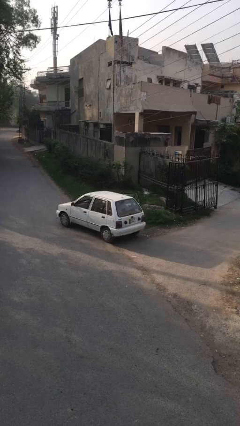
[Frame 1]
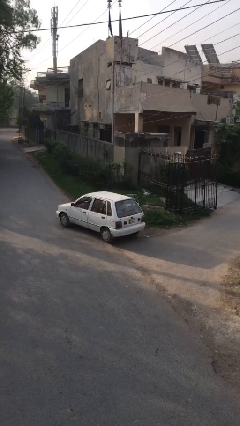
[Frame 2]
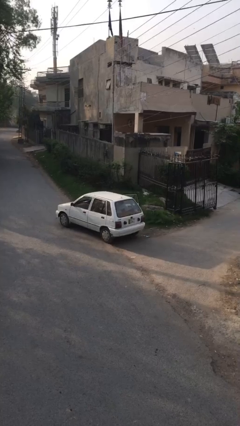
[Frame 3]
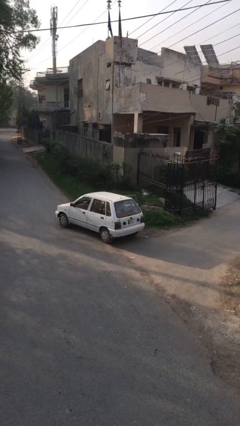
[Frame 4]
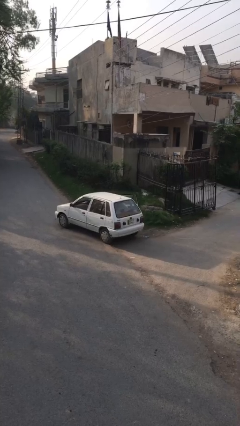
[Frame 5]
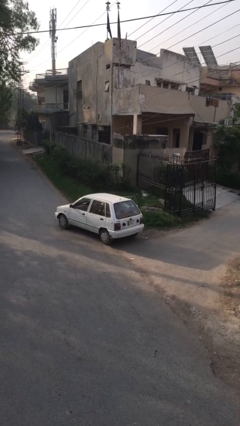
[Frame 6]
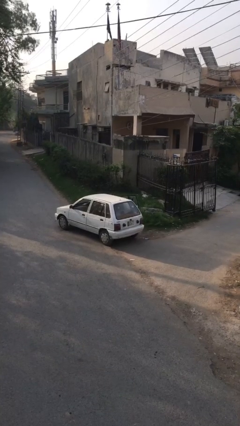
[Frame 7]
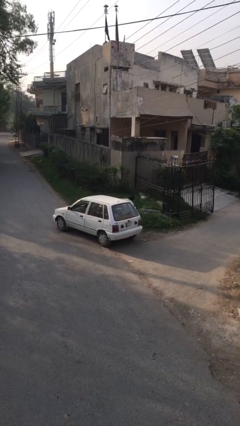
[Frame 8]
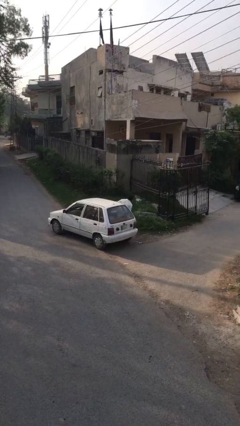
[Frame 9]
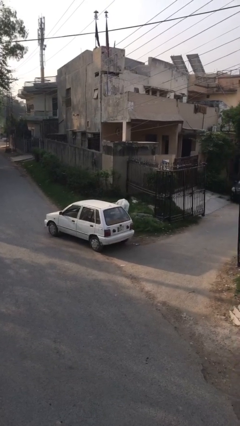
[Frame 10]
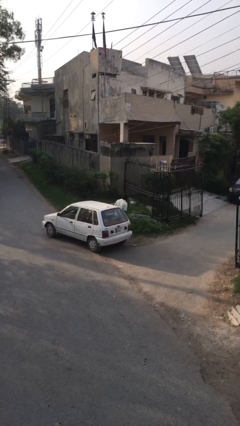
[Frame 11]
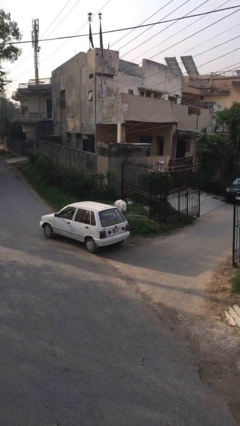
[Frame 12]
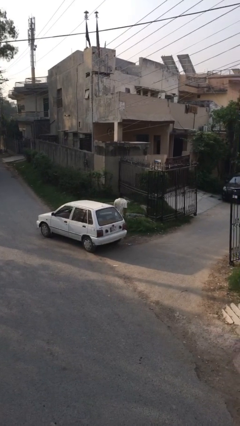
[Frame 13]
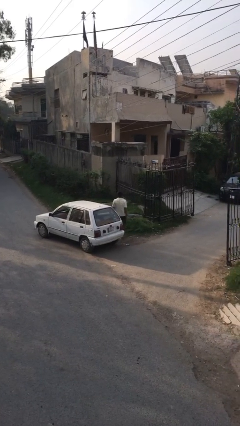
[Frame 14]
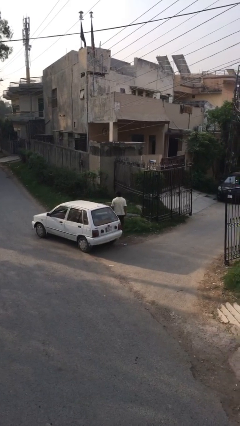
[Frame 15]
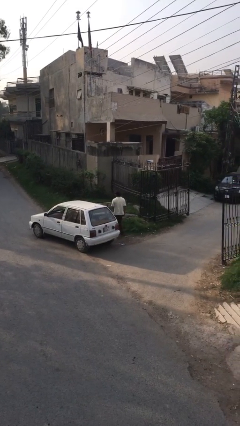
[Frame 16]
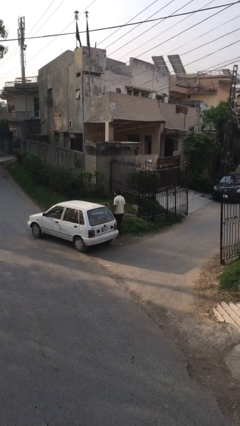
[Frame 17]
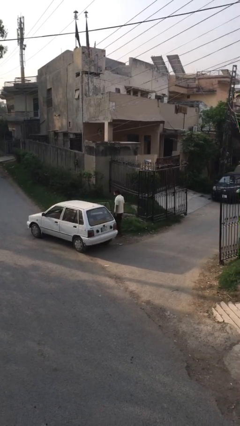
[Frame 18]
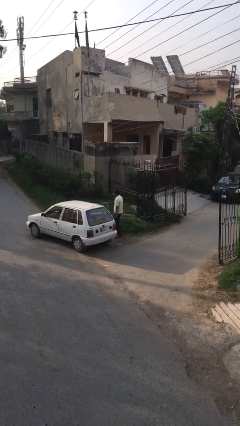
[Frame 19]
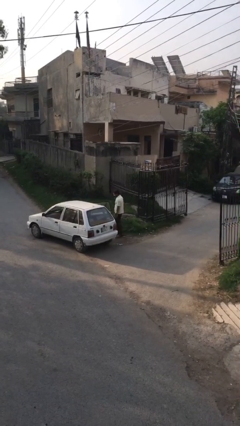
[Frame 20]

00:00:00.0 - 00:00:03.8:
person exits car

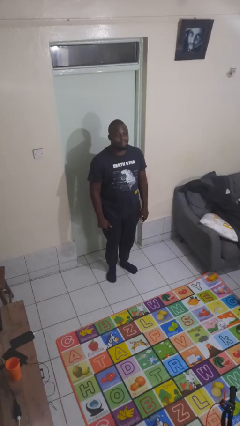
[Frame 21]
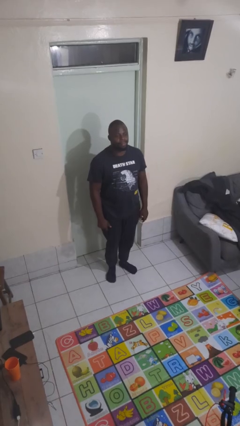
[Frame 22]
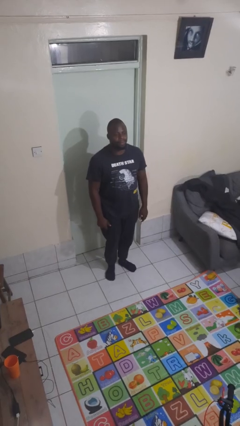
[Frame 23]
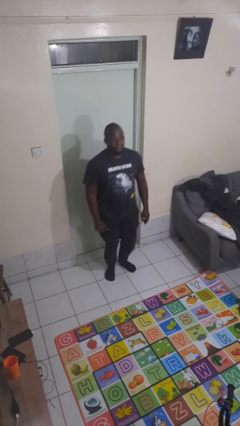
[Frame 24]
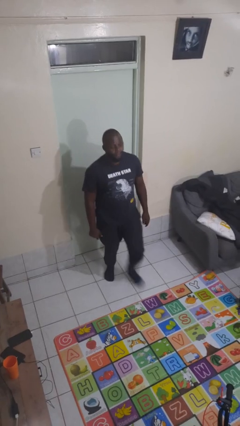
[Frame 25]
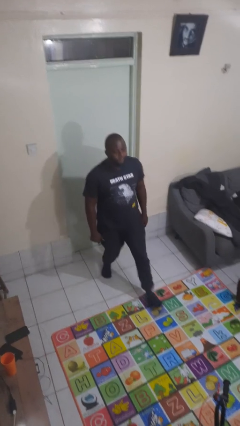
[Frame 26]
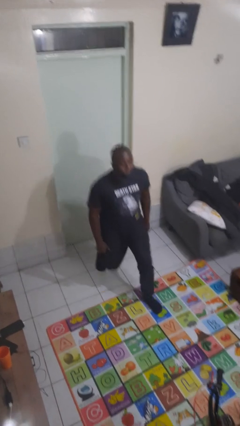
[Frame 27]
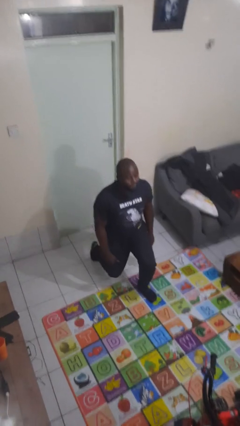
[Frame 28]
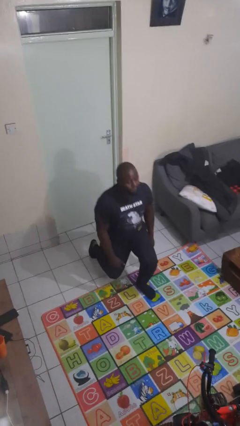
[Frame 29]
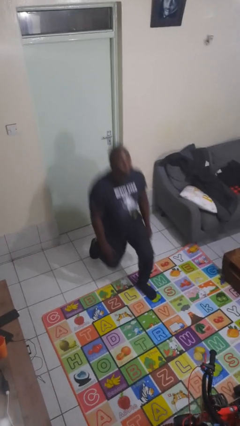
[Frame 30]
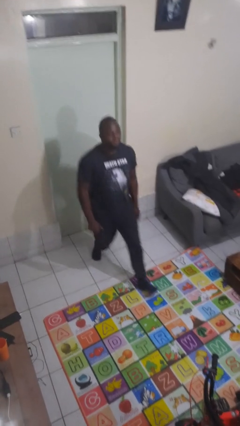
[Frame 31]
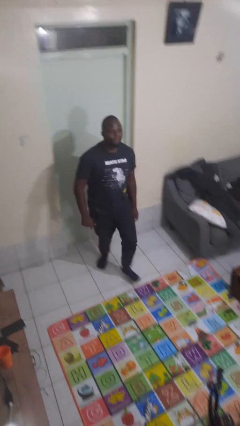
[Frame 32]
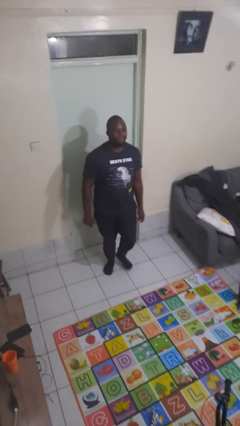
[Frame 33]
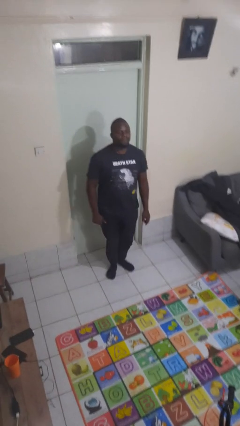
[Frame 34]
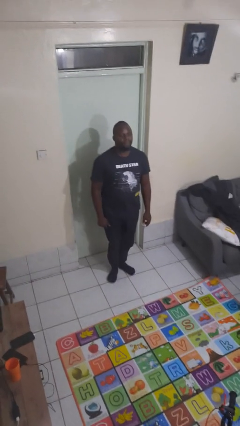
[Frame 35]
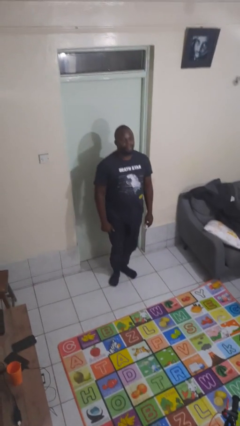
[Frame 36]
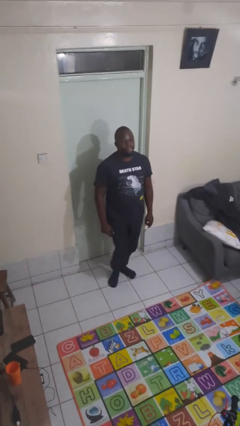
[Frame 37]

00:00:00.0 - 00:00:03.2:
person exercises with lunges

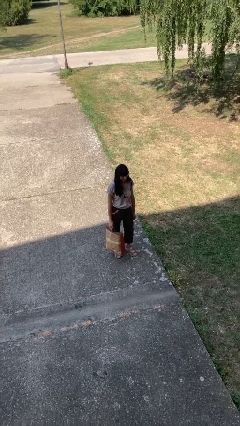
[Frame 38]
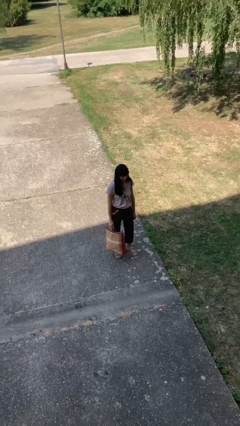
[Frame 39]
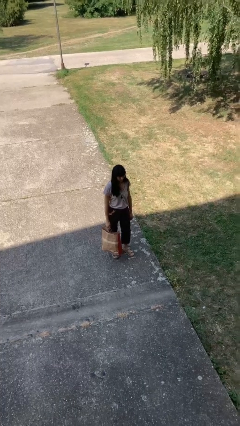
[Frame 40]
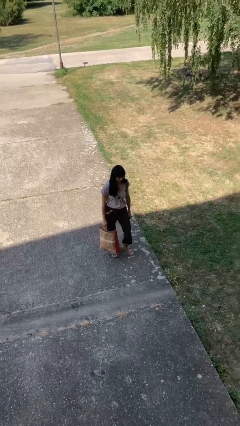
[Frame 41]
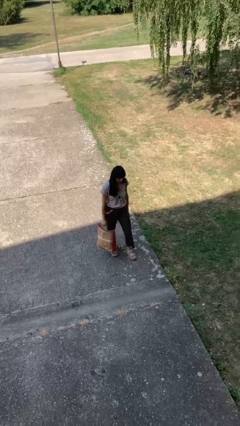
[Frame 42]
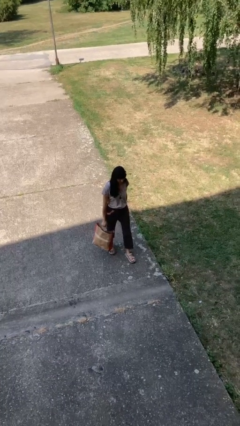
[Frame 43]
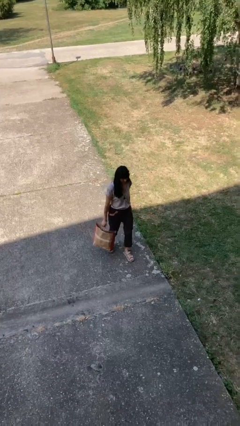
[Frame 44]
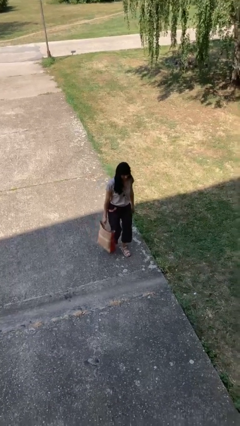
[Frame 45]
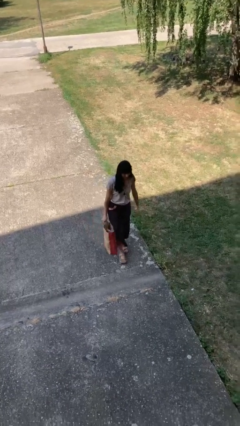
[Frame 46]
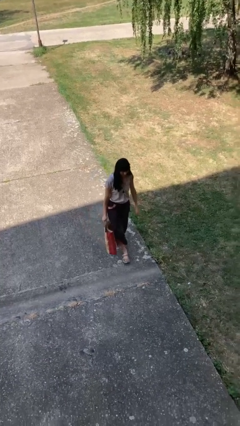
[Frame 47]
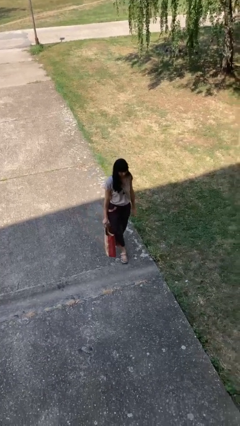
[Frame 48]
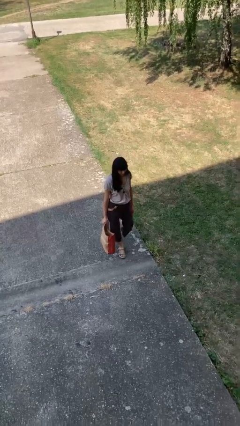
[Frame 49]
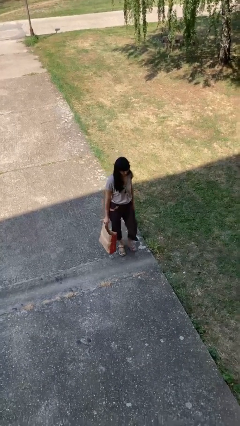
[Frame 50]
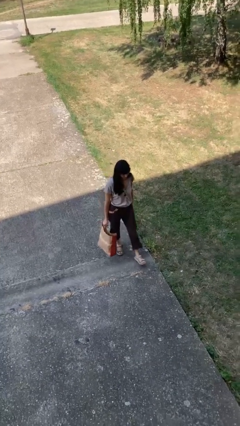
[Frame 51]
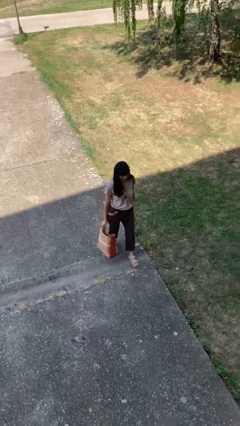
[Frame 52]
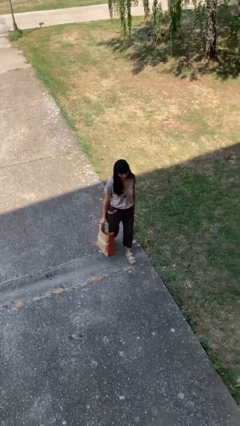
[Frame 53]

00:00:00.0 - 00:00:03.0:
person carries groceries

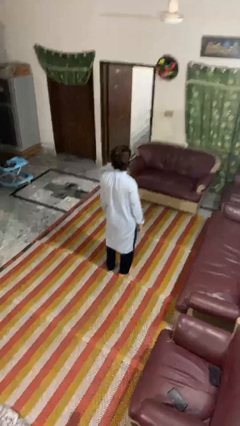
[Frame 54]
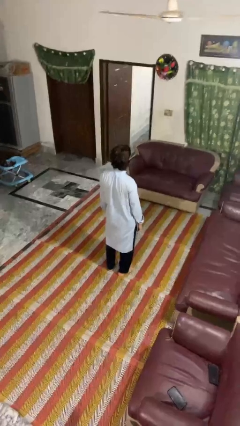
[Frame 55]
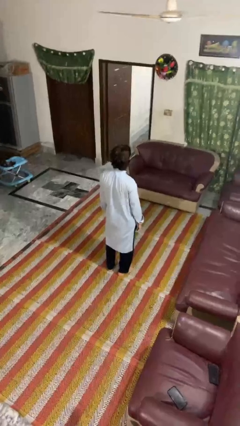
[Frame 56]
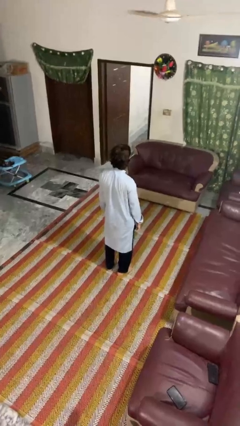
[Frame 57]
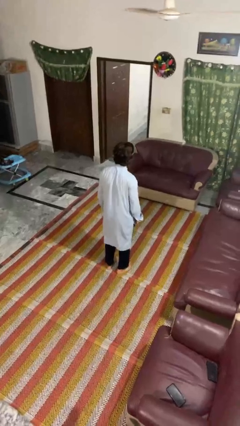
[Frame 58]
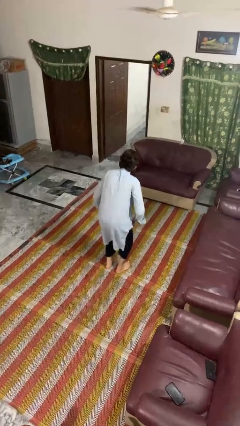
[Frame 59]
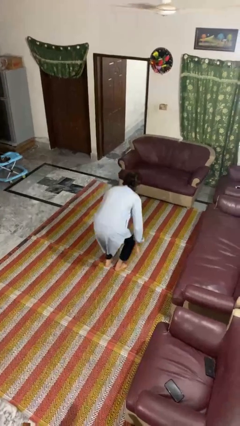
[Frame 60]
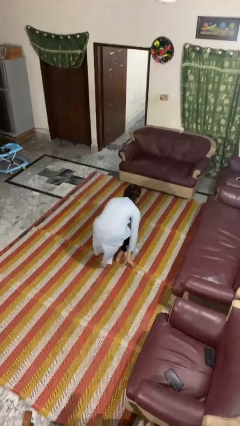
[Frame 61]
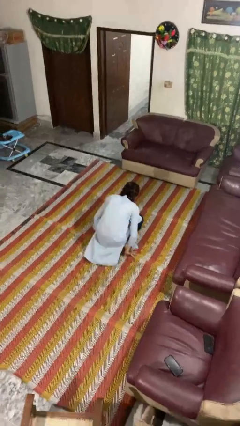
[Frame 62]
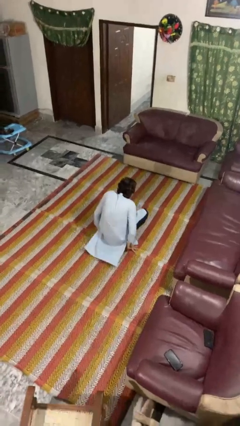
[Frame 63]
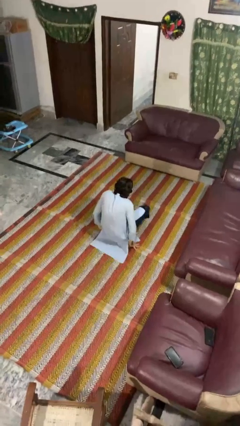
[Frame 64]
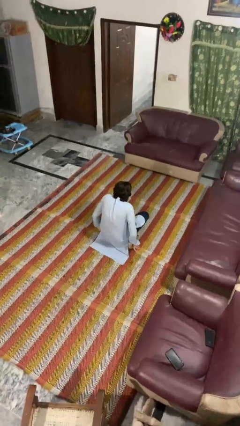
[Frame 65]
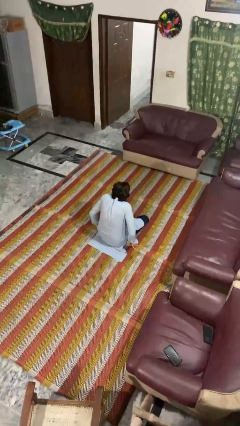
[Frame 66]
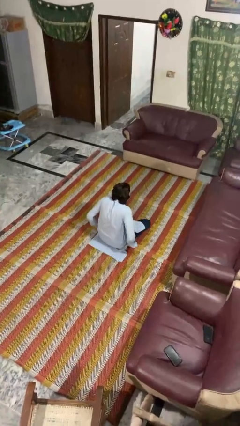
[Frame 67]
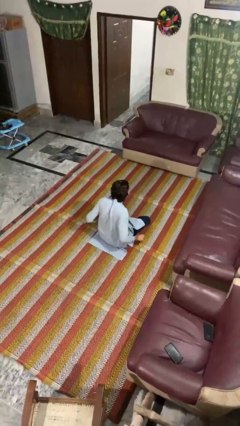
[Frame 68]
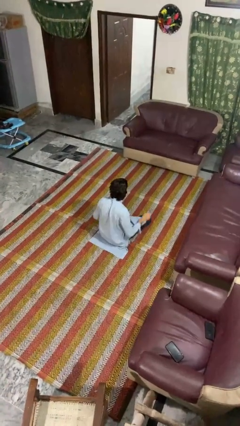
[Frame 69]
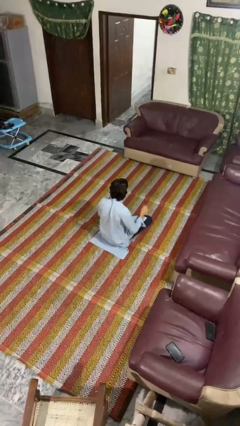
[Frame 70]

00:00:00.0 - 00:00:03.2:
person sits crisscross

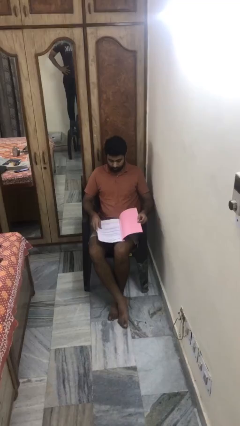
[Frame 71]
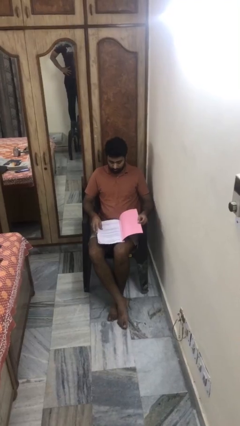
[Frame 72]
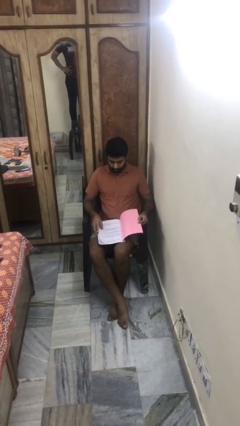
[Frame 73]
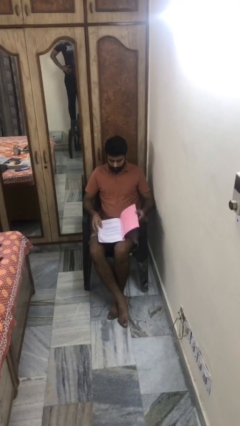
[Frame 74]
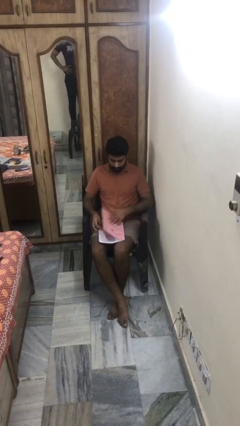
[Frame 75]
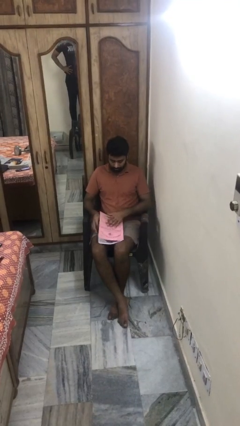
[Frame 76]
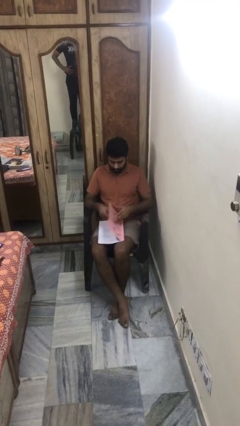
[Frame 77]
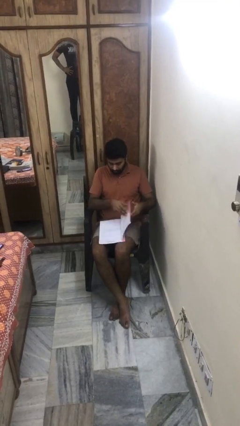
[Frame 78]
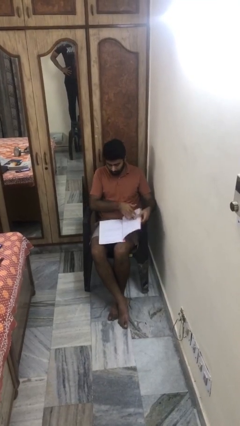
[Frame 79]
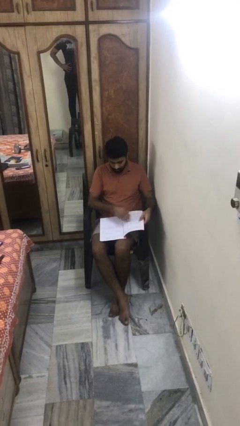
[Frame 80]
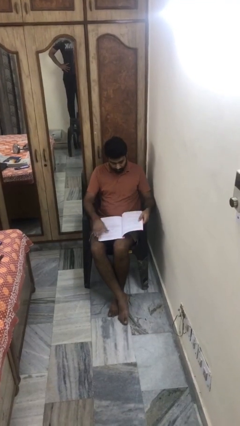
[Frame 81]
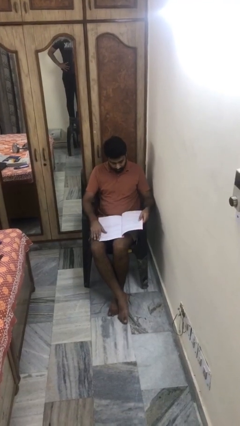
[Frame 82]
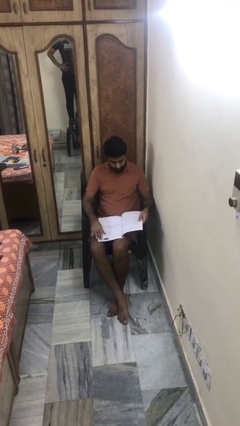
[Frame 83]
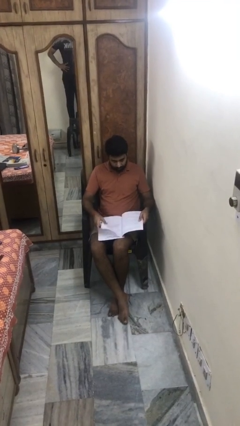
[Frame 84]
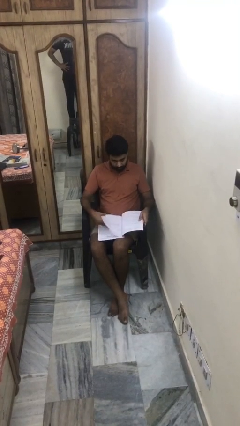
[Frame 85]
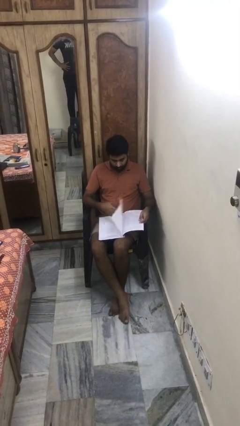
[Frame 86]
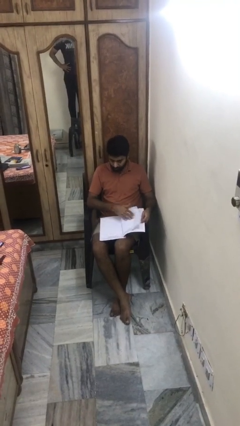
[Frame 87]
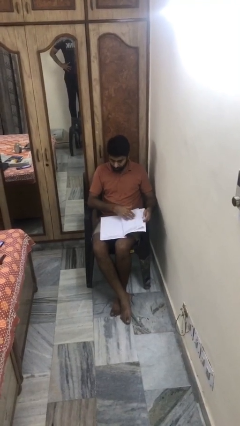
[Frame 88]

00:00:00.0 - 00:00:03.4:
person reads magazine

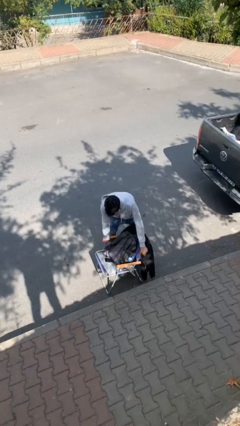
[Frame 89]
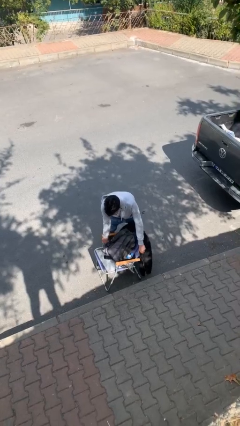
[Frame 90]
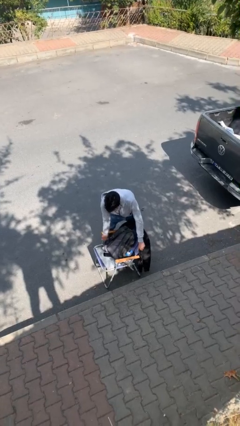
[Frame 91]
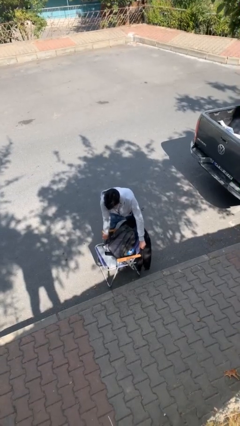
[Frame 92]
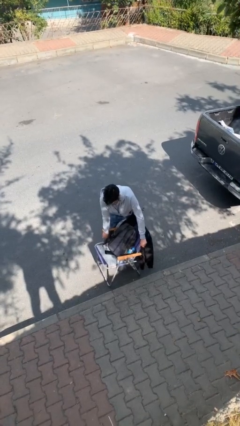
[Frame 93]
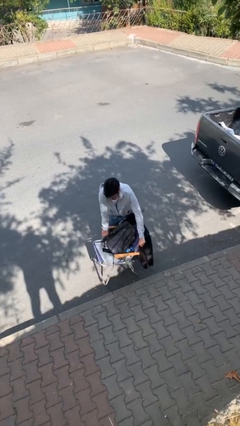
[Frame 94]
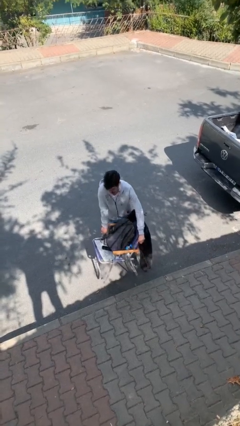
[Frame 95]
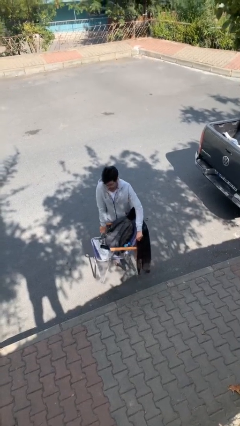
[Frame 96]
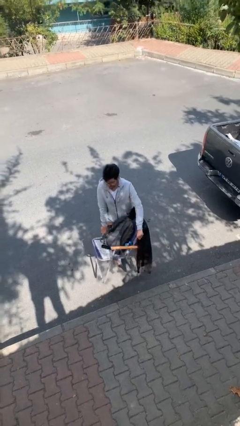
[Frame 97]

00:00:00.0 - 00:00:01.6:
person picks up object from floor
